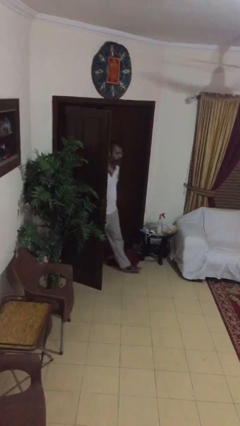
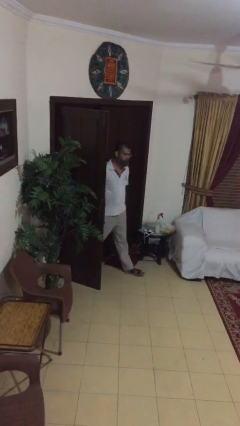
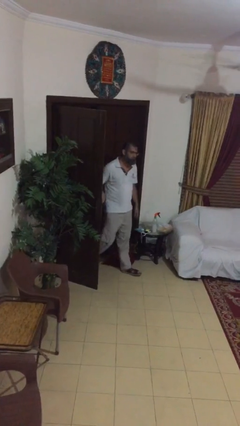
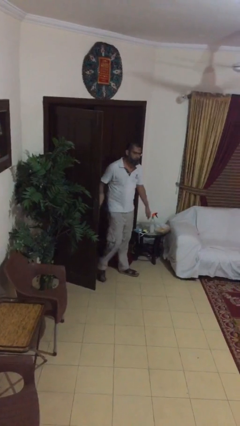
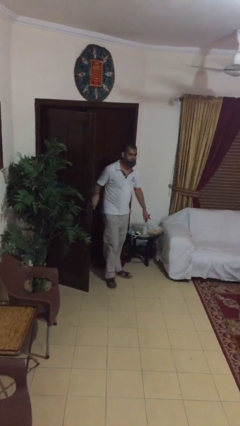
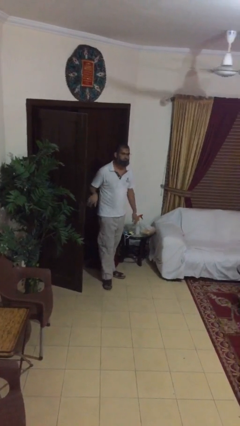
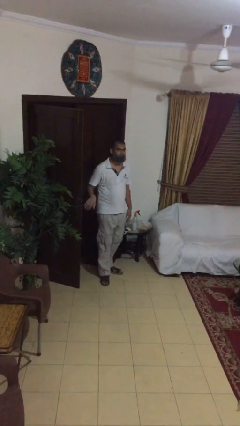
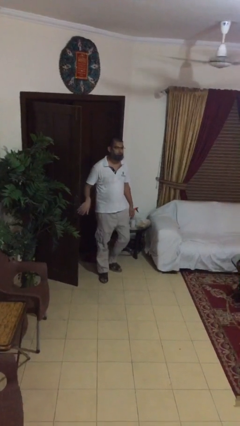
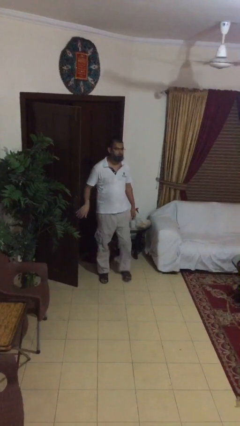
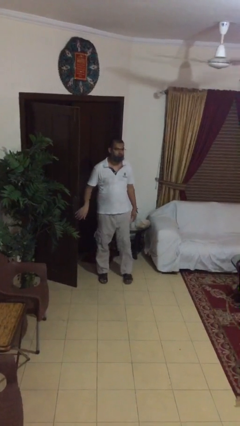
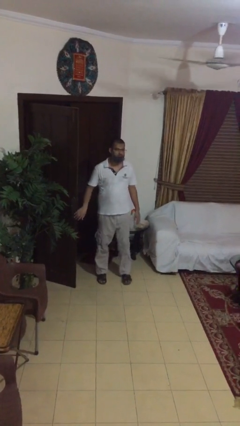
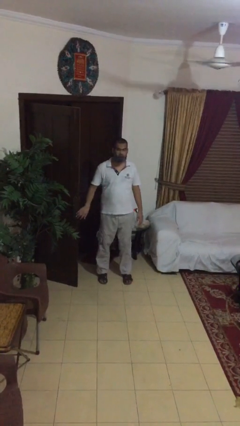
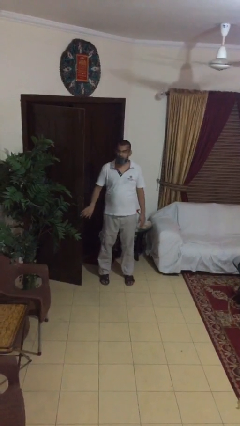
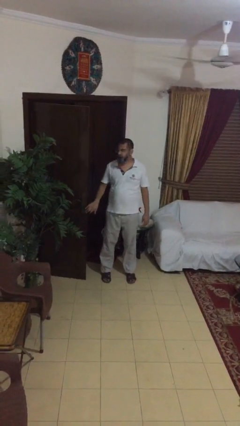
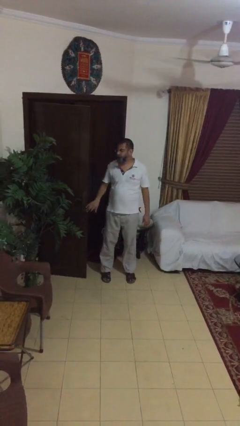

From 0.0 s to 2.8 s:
person enters scene through structure

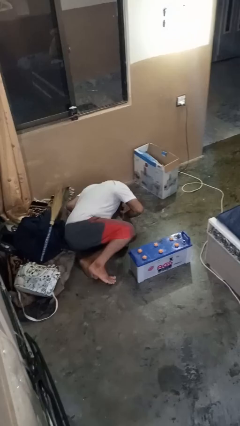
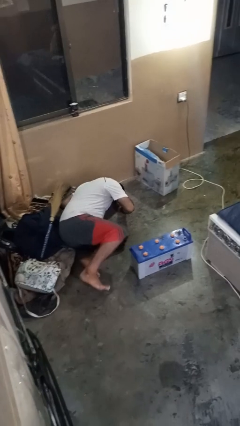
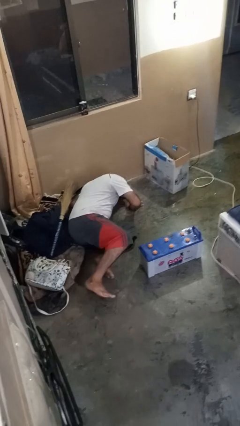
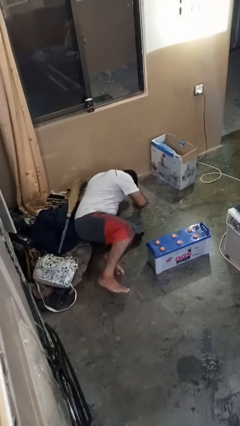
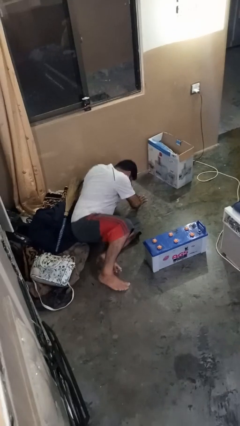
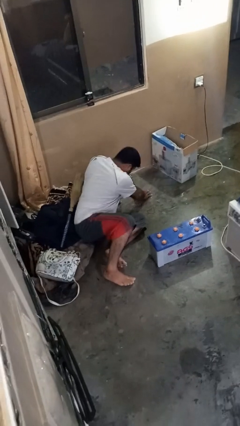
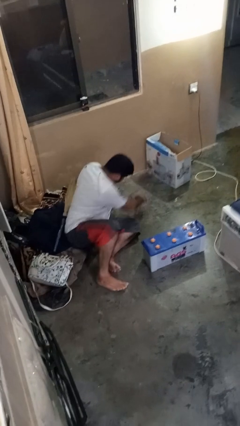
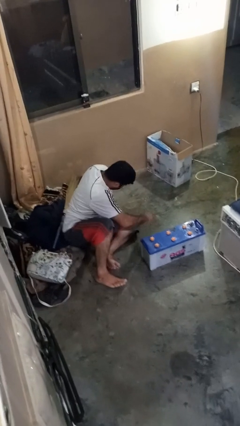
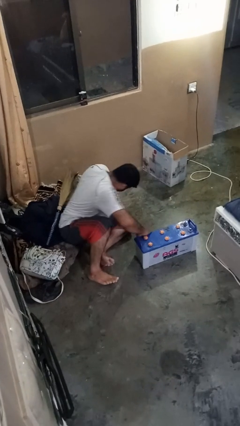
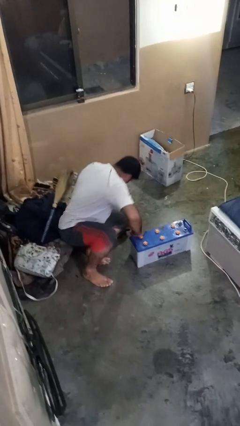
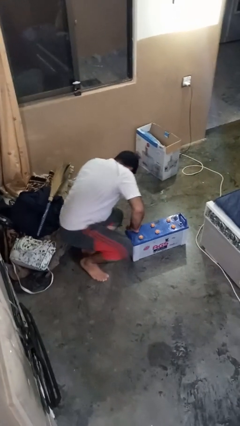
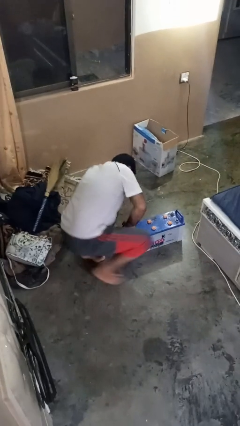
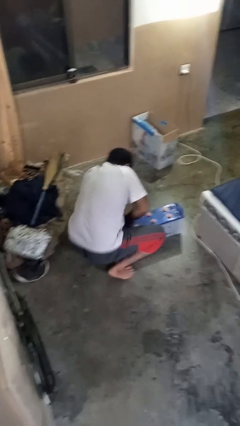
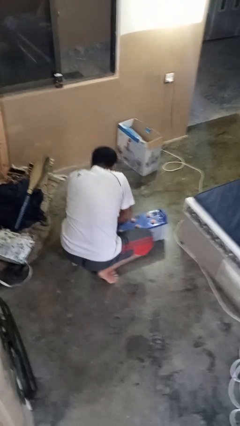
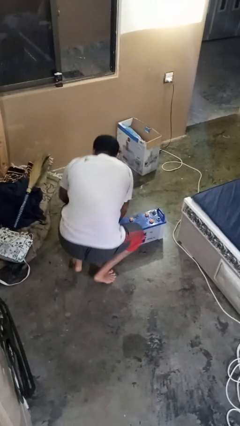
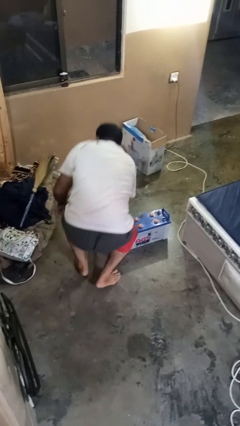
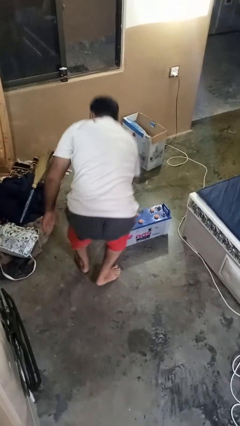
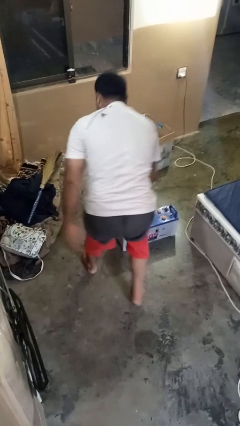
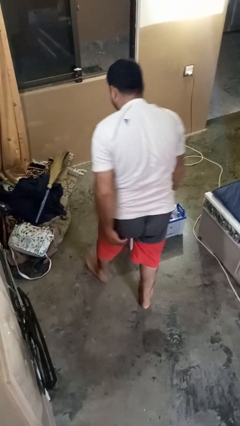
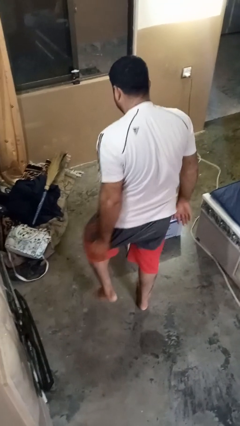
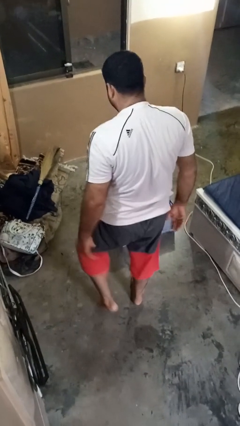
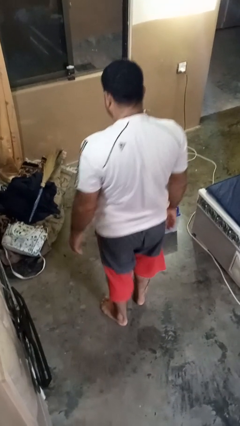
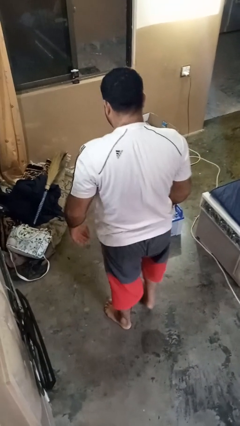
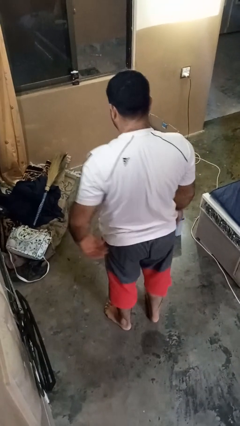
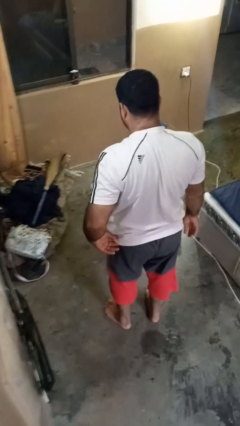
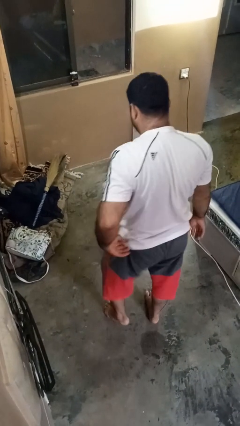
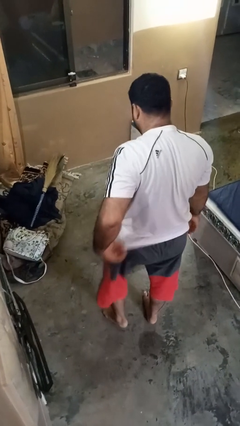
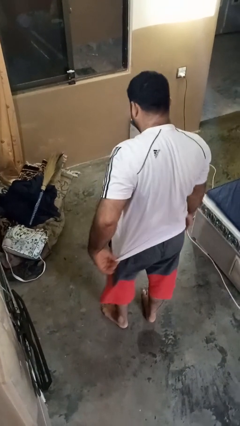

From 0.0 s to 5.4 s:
person stands up from floor

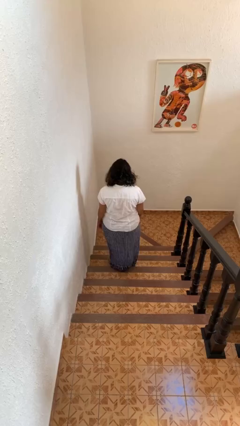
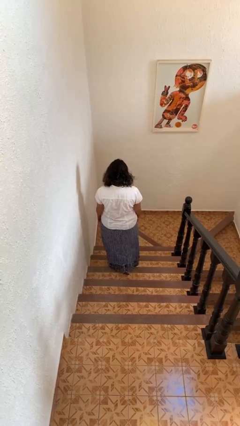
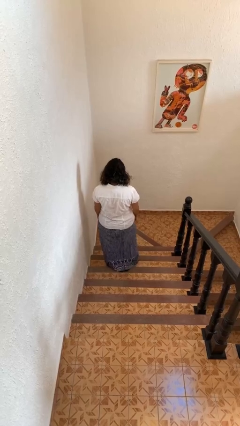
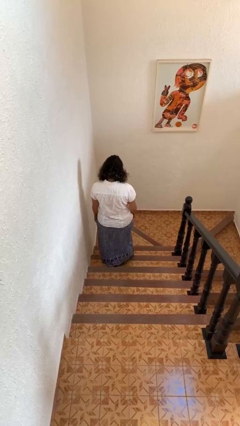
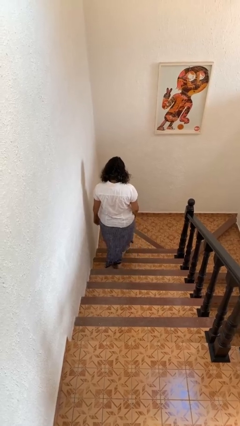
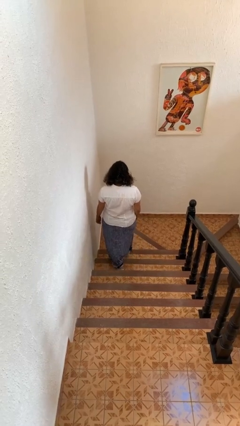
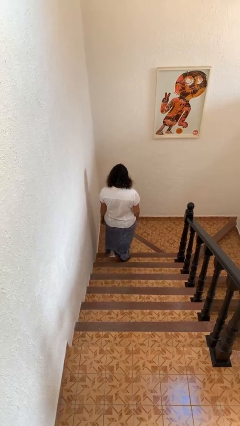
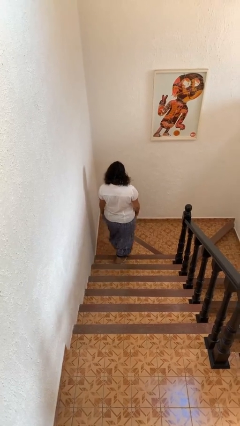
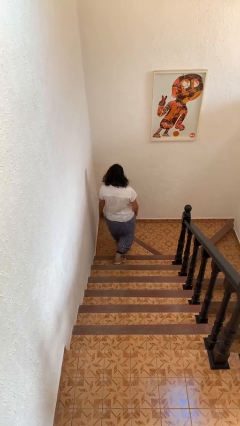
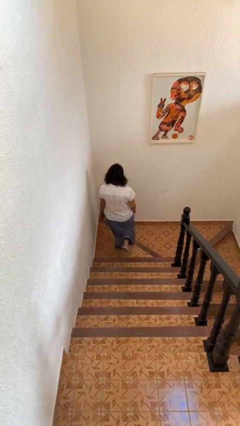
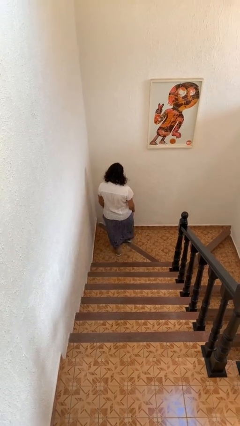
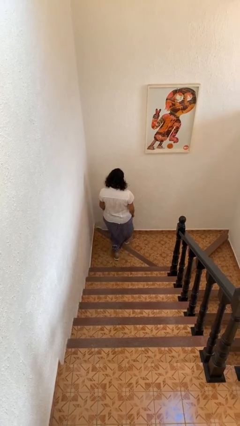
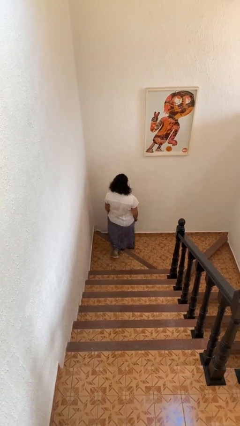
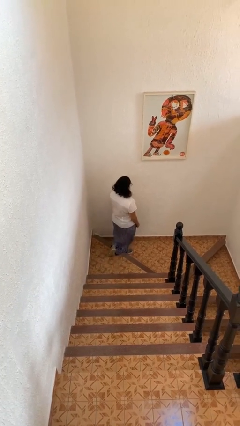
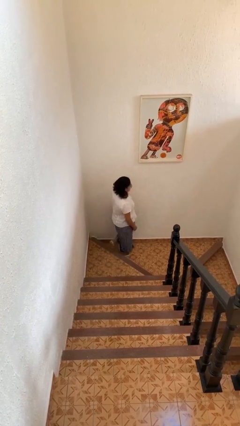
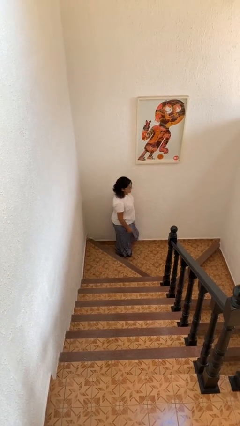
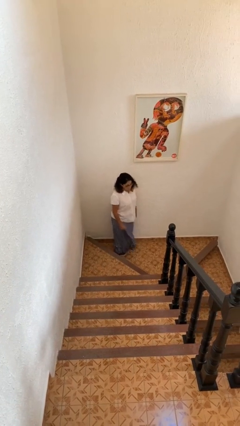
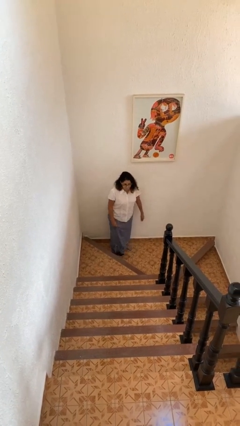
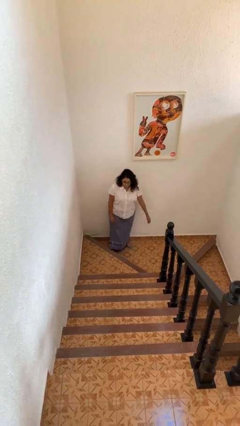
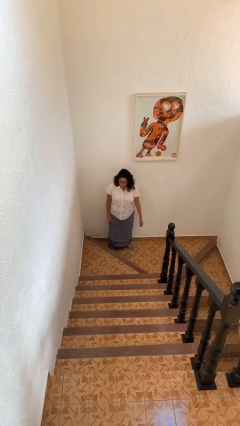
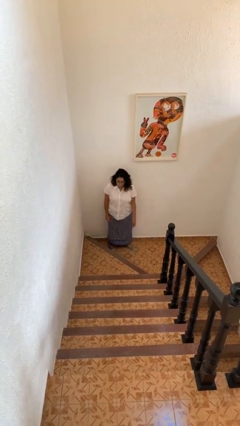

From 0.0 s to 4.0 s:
person climbs down stairs

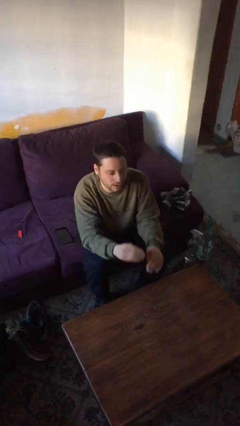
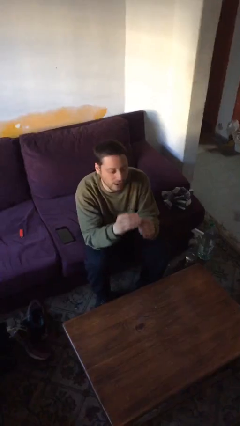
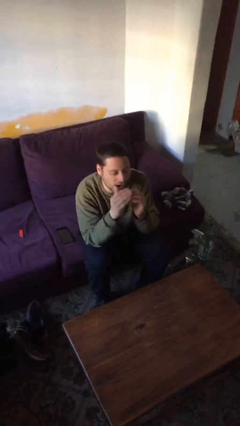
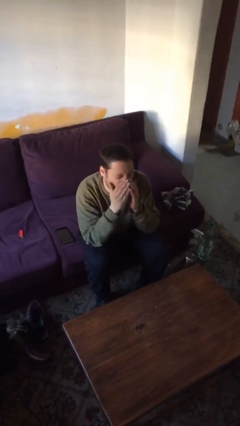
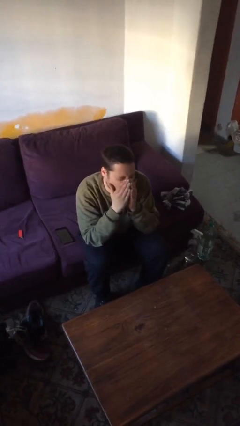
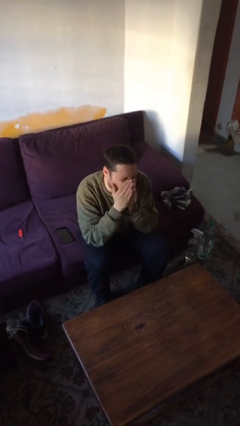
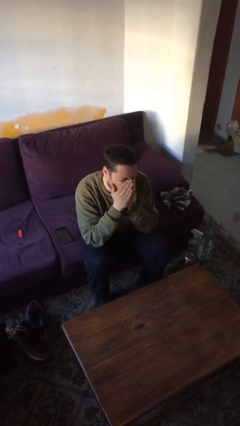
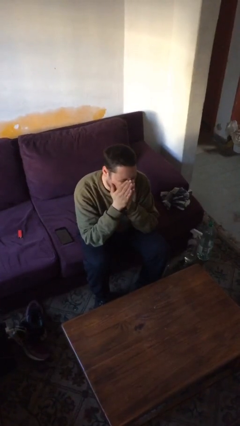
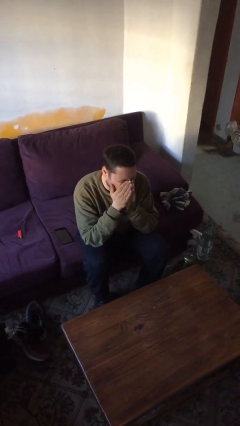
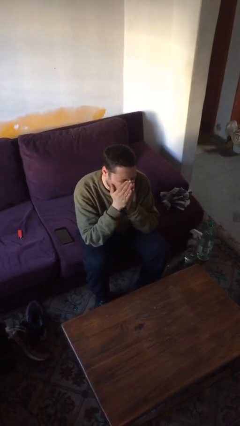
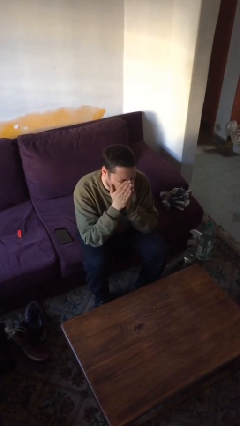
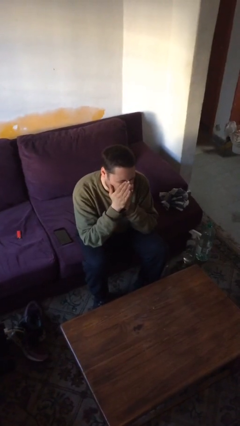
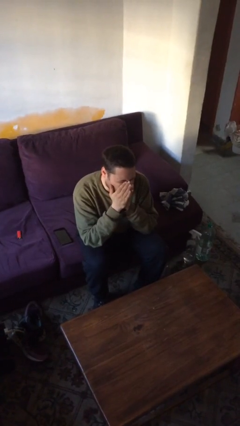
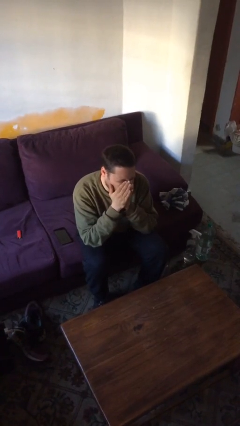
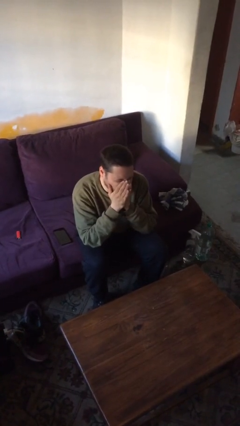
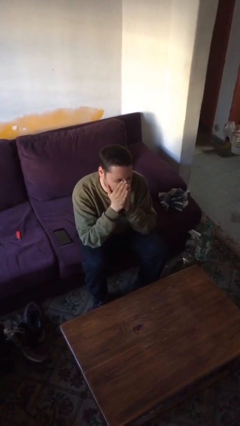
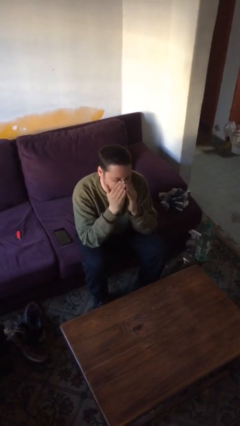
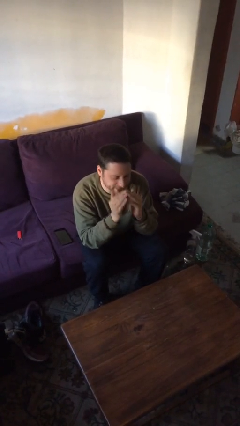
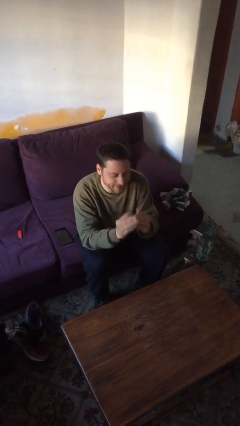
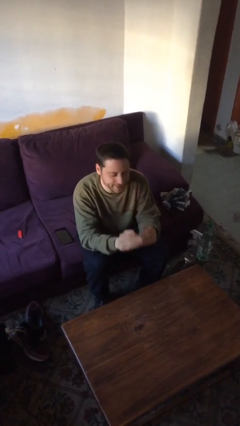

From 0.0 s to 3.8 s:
person yawns

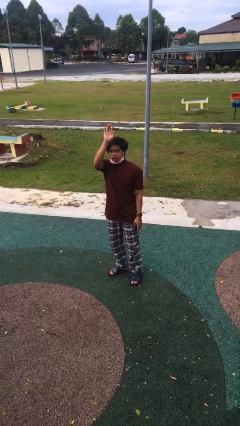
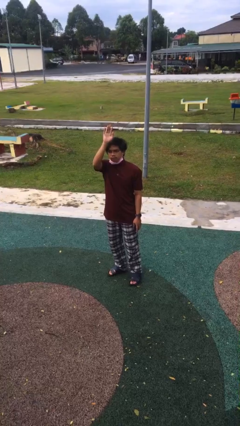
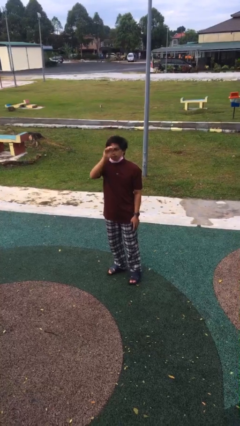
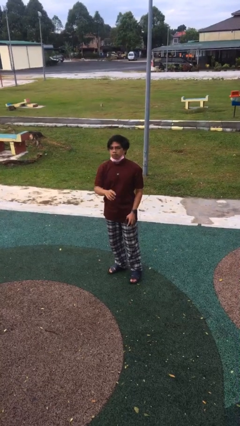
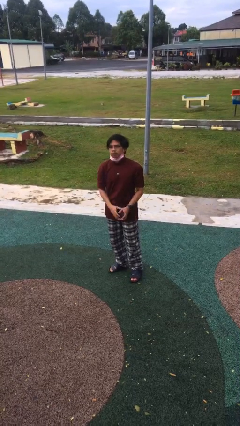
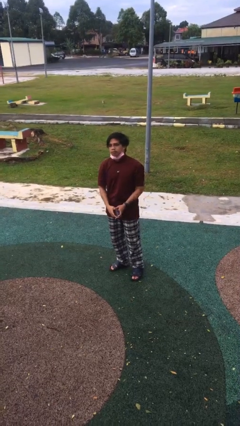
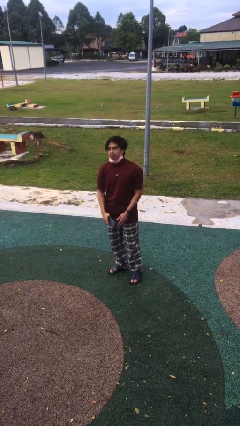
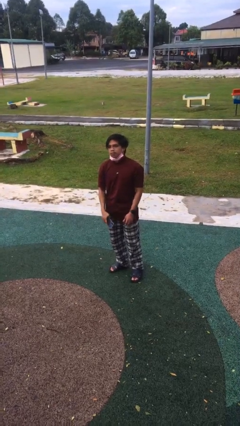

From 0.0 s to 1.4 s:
person gestures lower hand

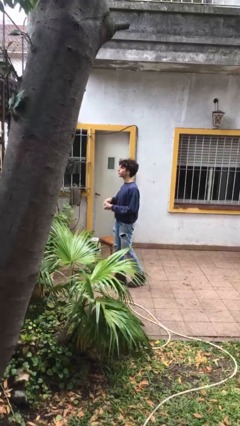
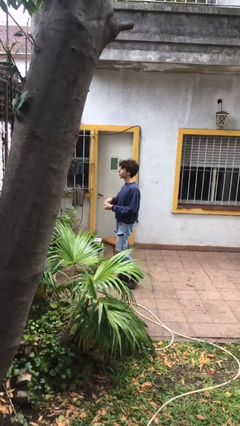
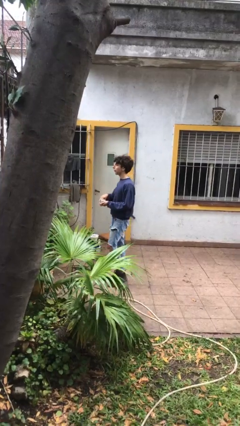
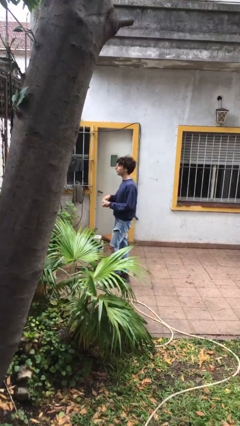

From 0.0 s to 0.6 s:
person eats snack from bag
